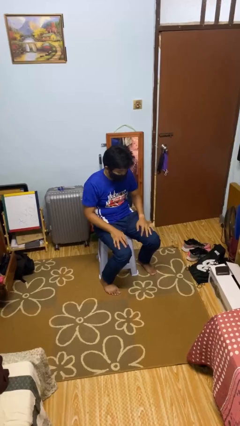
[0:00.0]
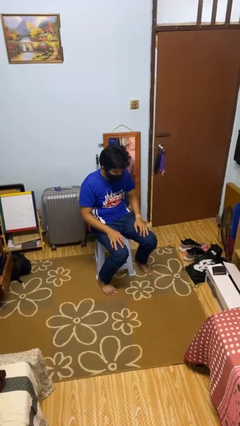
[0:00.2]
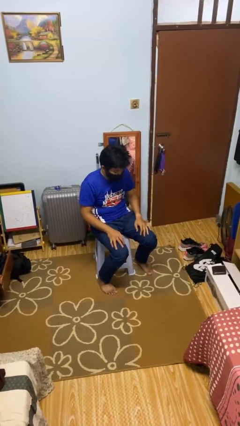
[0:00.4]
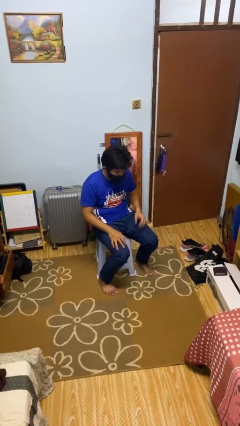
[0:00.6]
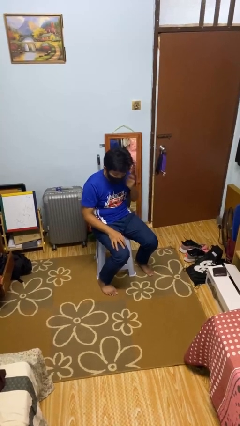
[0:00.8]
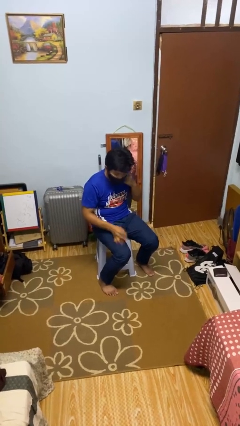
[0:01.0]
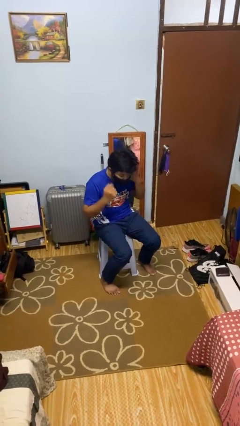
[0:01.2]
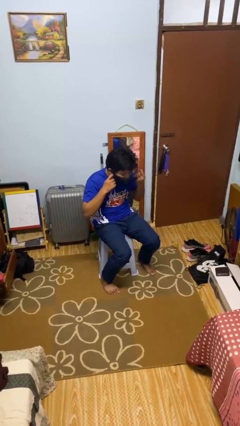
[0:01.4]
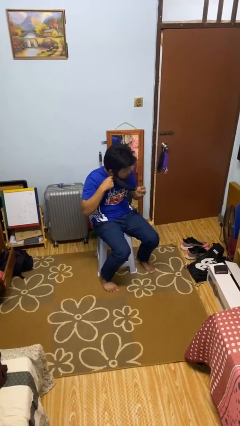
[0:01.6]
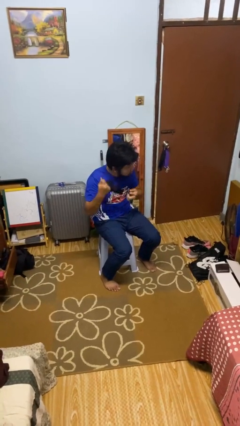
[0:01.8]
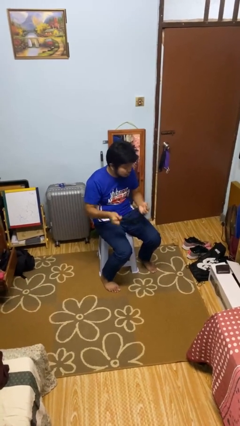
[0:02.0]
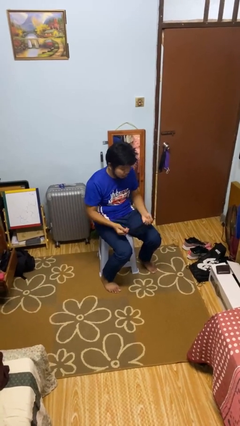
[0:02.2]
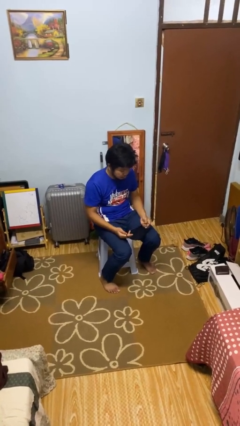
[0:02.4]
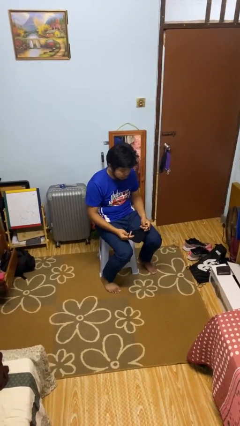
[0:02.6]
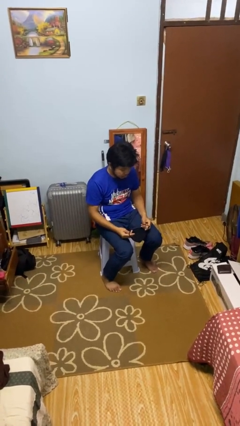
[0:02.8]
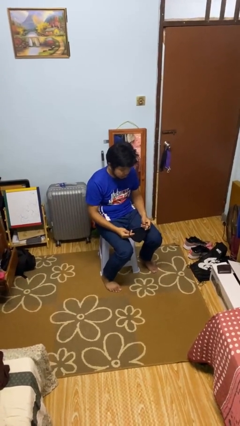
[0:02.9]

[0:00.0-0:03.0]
person takes off facemask

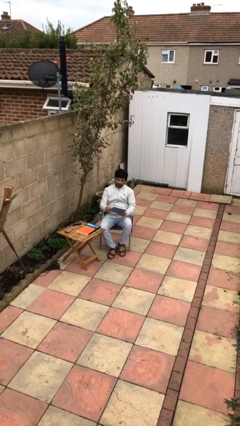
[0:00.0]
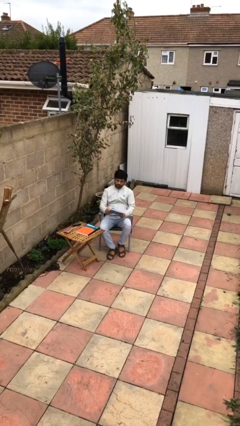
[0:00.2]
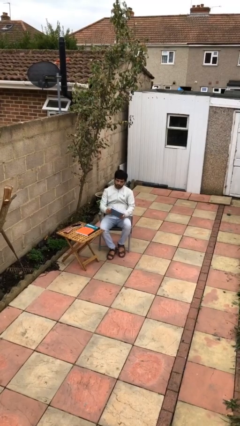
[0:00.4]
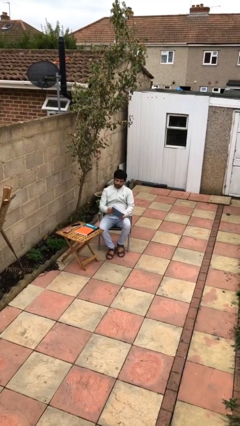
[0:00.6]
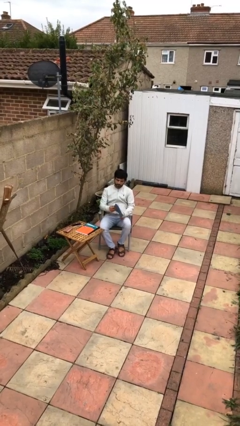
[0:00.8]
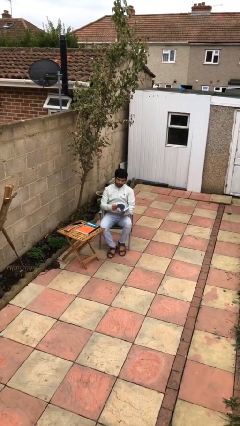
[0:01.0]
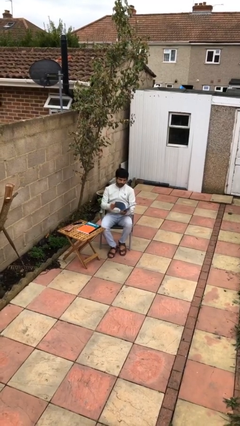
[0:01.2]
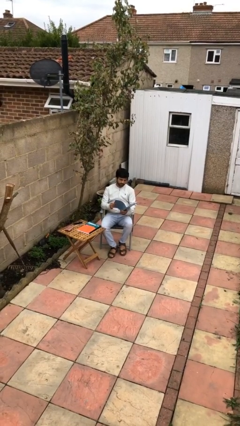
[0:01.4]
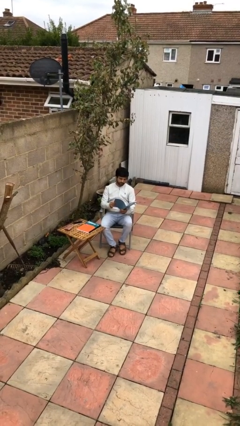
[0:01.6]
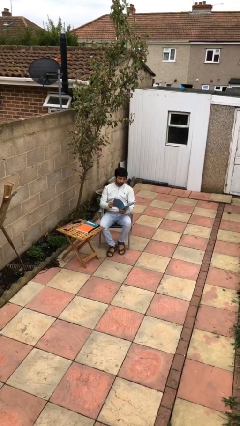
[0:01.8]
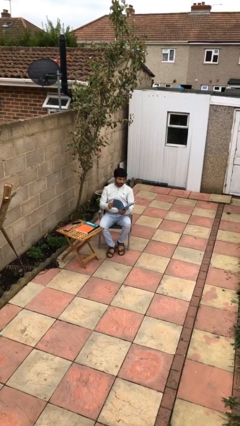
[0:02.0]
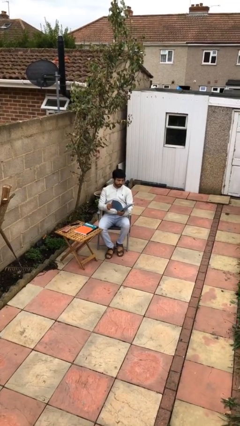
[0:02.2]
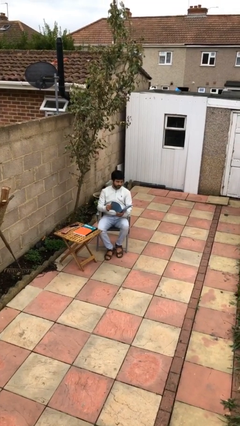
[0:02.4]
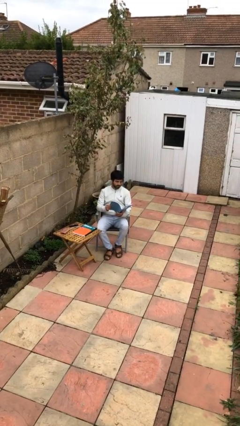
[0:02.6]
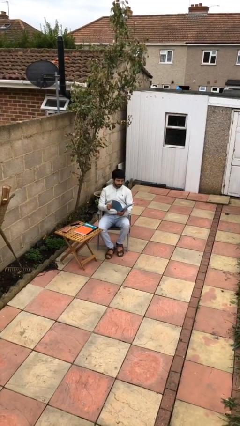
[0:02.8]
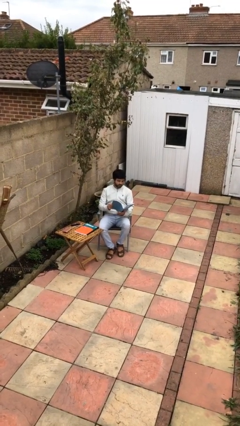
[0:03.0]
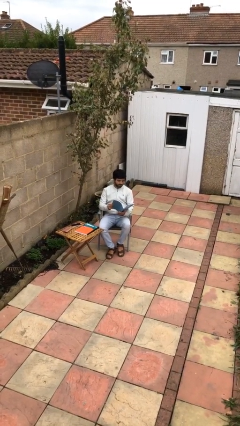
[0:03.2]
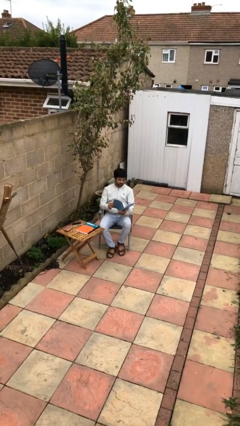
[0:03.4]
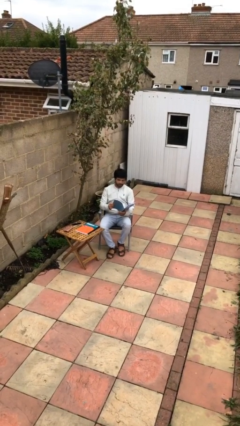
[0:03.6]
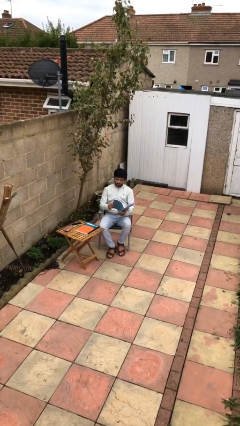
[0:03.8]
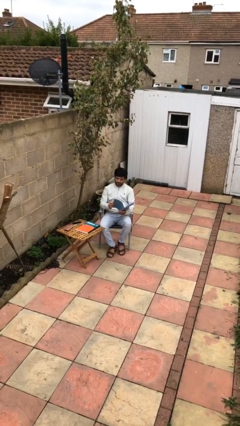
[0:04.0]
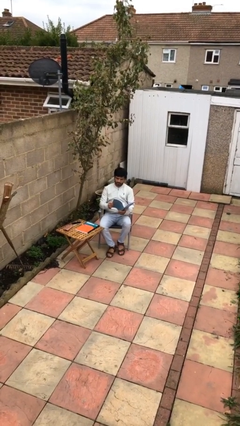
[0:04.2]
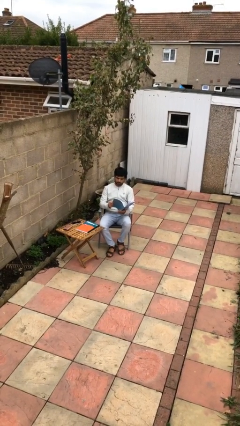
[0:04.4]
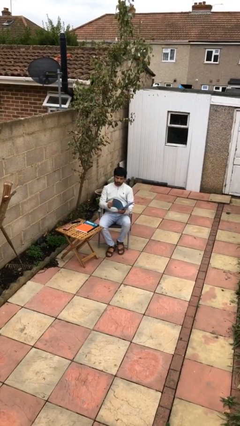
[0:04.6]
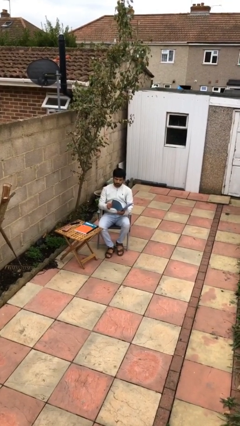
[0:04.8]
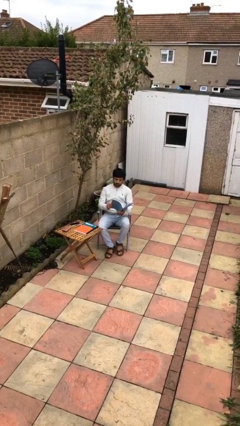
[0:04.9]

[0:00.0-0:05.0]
person reads document

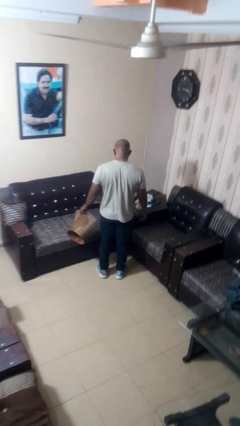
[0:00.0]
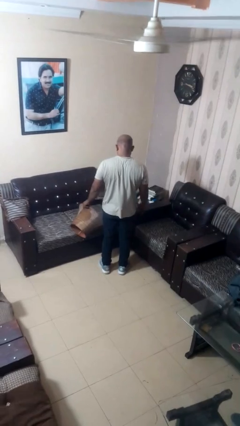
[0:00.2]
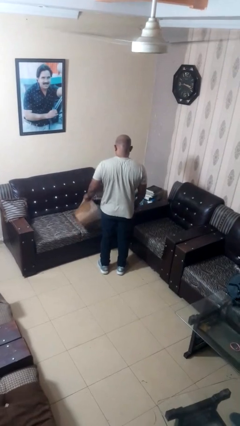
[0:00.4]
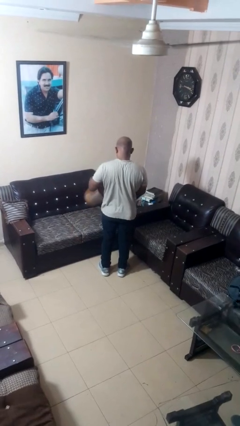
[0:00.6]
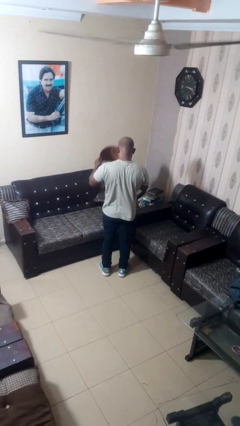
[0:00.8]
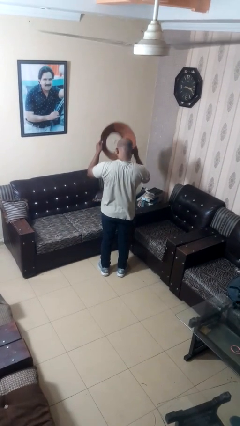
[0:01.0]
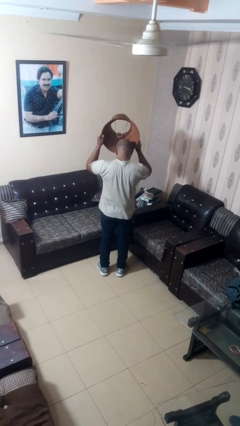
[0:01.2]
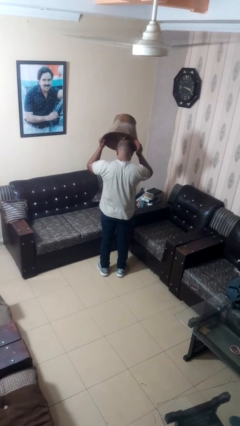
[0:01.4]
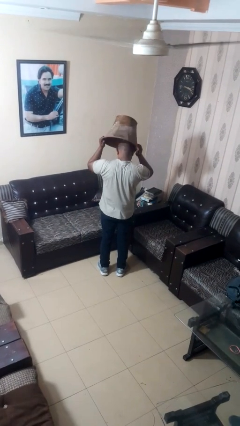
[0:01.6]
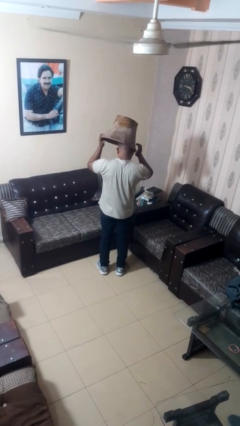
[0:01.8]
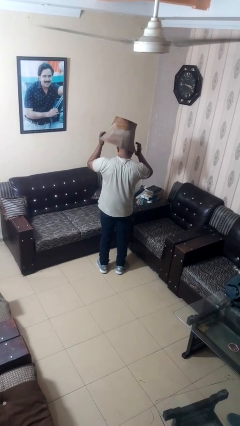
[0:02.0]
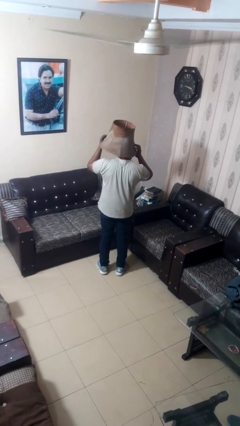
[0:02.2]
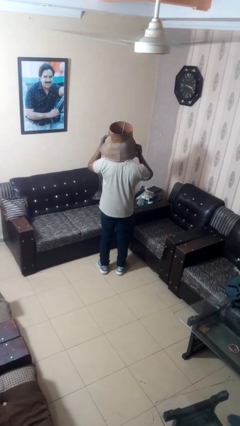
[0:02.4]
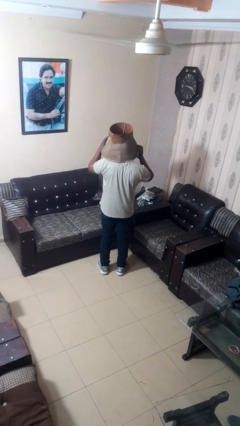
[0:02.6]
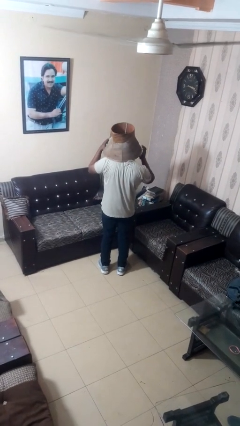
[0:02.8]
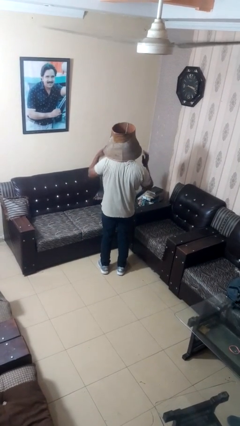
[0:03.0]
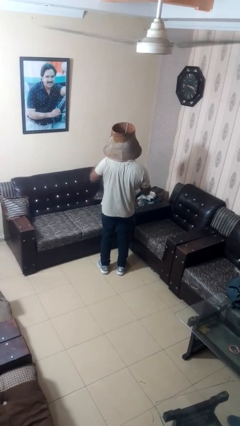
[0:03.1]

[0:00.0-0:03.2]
person puts on hat

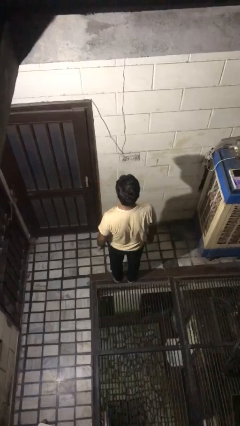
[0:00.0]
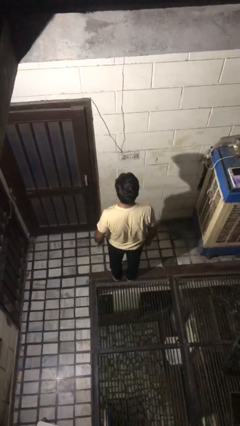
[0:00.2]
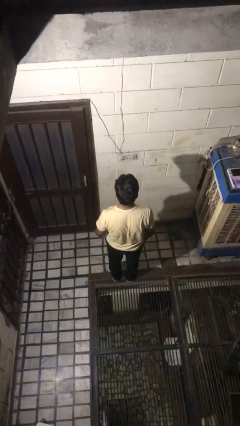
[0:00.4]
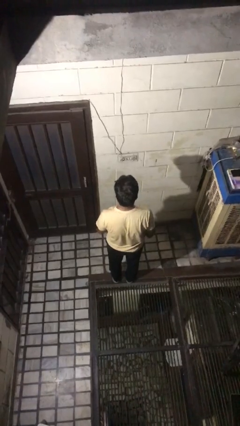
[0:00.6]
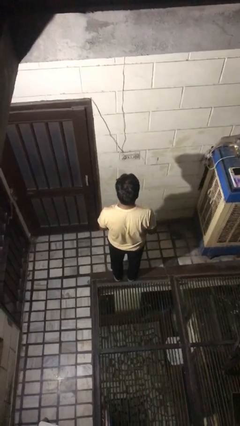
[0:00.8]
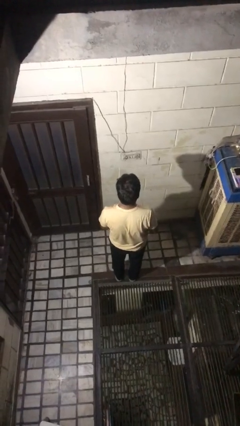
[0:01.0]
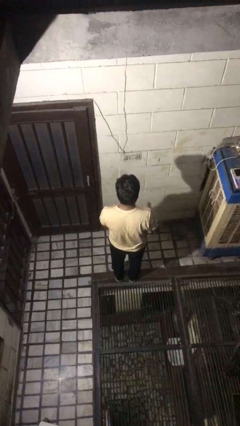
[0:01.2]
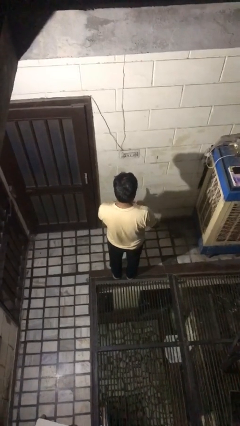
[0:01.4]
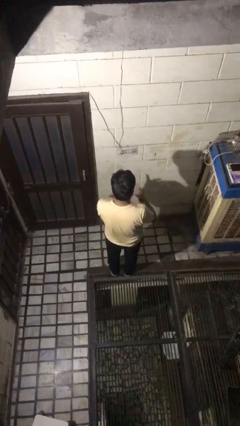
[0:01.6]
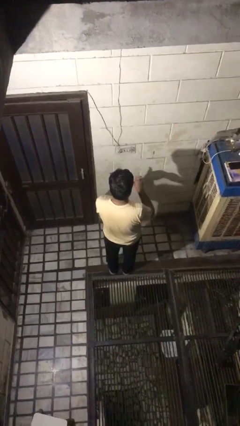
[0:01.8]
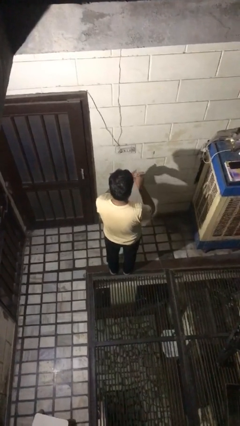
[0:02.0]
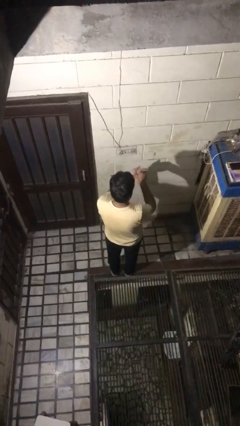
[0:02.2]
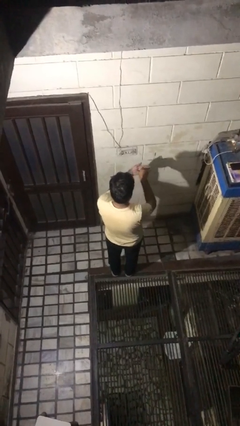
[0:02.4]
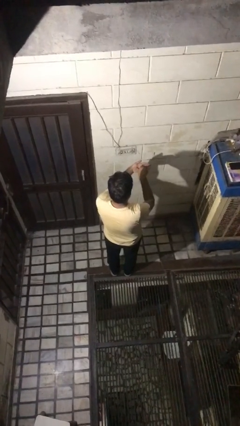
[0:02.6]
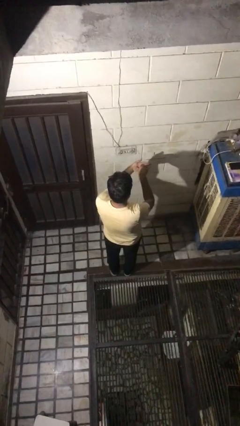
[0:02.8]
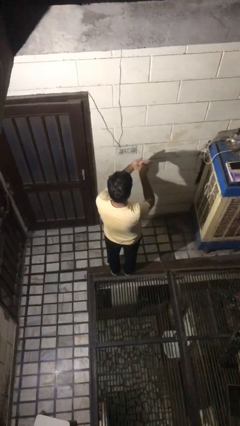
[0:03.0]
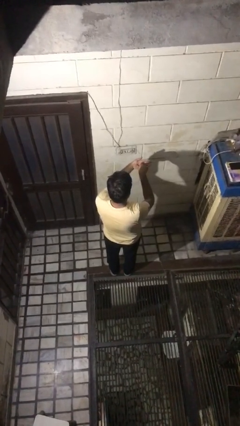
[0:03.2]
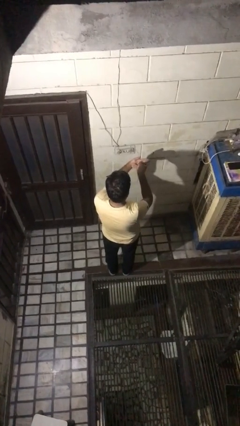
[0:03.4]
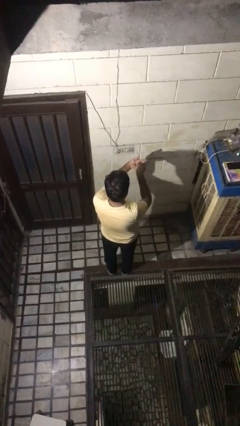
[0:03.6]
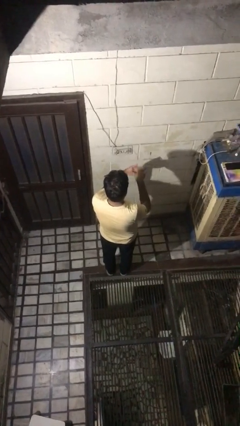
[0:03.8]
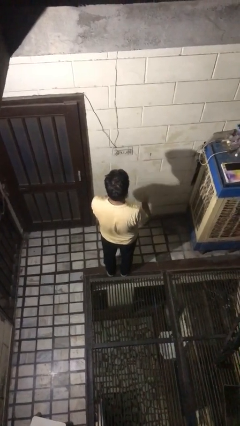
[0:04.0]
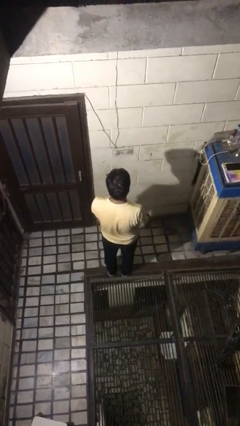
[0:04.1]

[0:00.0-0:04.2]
person gestures hang loose

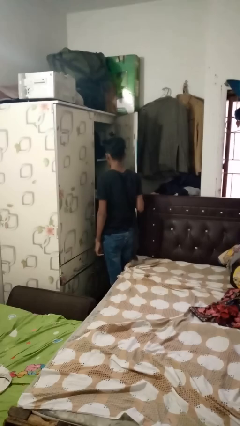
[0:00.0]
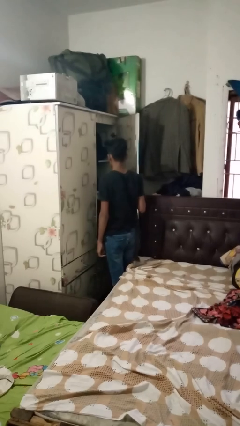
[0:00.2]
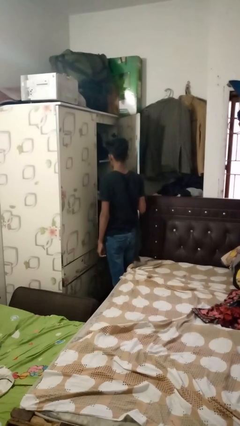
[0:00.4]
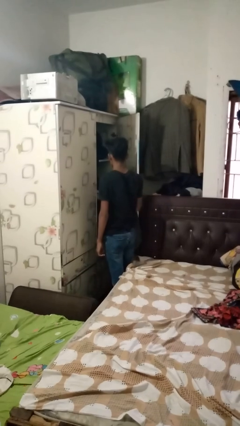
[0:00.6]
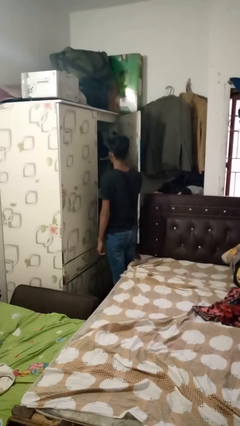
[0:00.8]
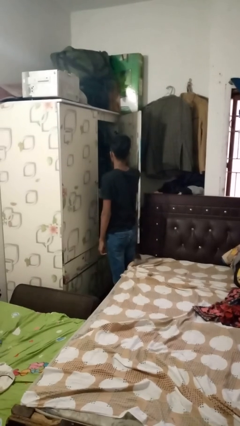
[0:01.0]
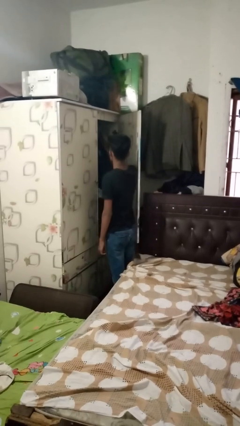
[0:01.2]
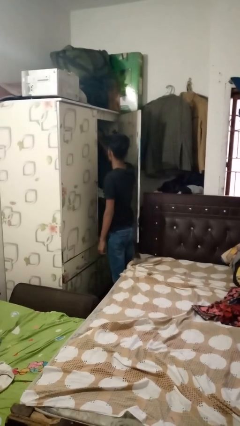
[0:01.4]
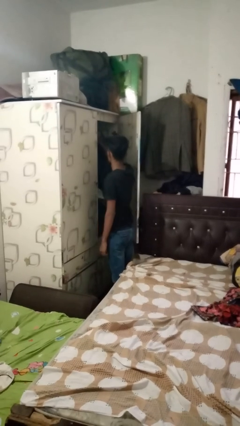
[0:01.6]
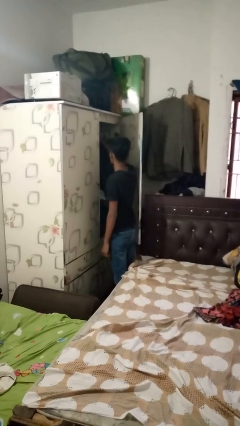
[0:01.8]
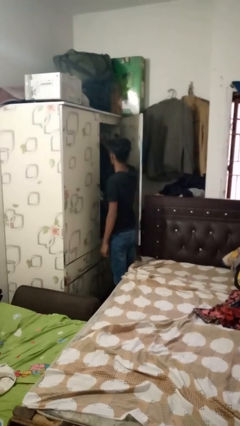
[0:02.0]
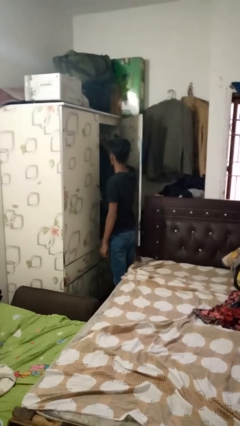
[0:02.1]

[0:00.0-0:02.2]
person puts clothes into closet
